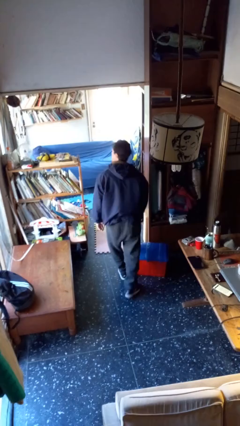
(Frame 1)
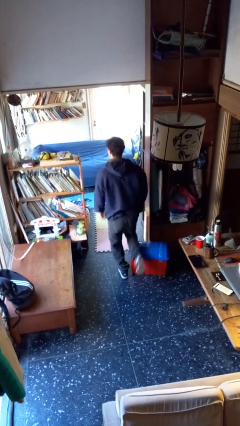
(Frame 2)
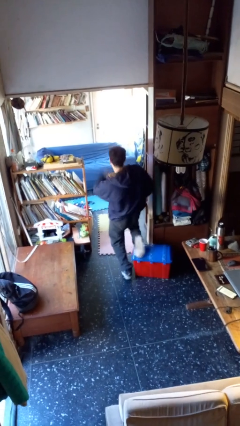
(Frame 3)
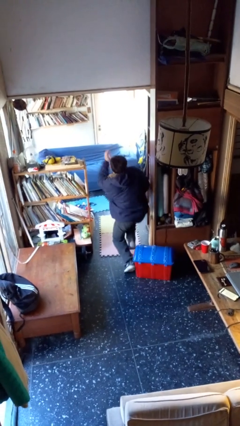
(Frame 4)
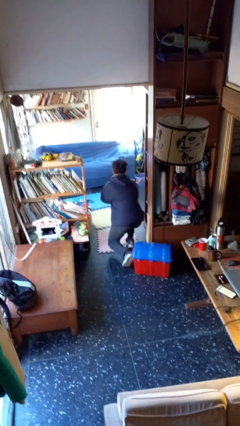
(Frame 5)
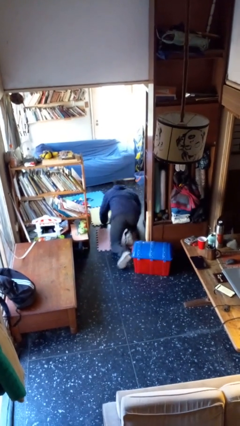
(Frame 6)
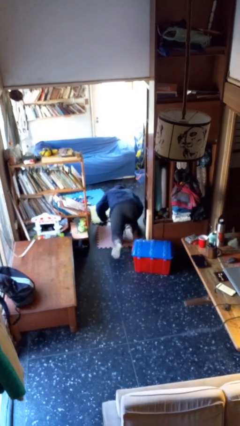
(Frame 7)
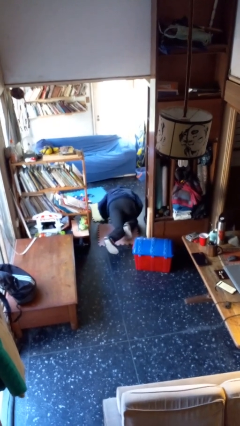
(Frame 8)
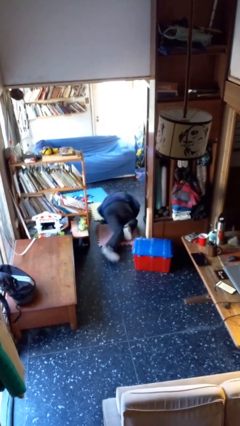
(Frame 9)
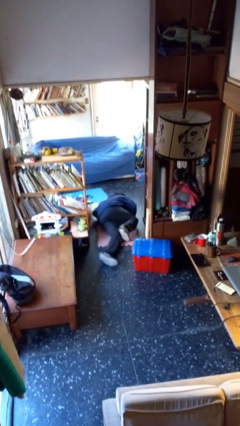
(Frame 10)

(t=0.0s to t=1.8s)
person trips on object on floor

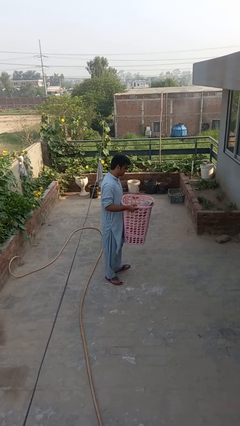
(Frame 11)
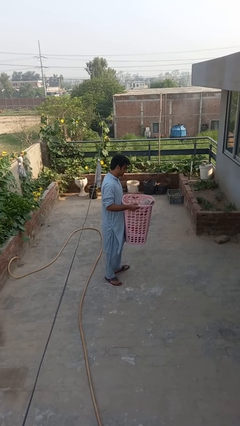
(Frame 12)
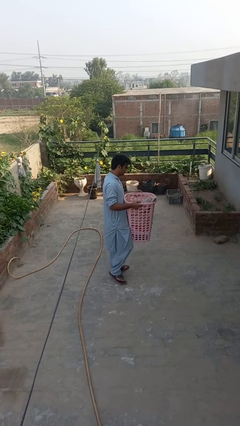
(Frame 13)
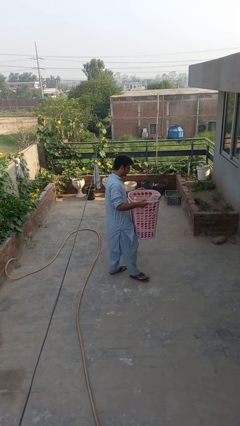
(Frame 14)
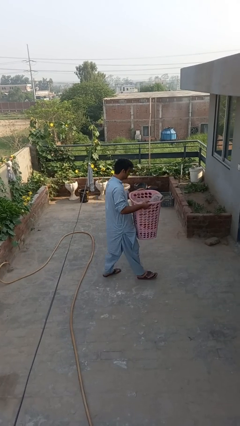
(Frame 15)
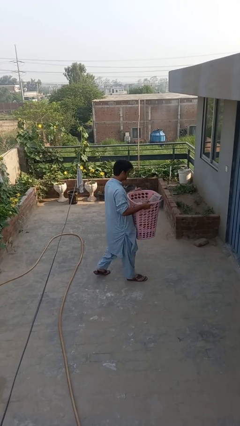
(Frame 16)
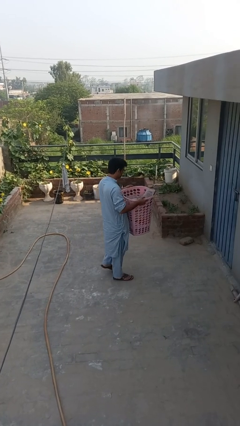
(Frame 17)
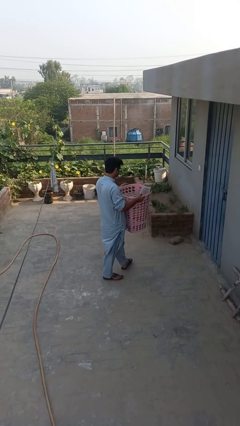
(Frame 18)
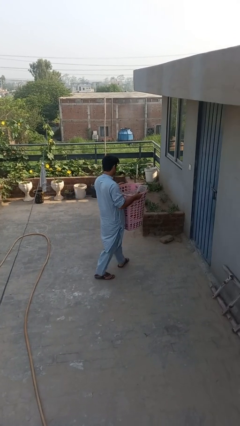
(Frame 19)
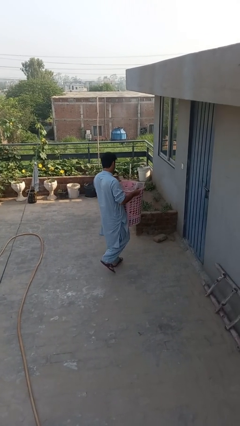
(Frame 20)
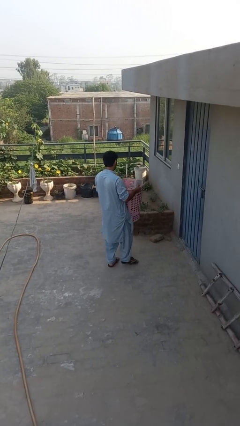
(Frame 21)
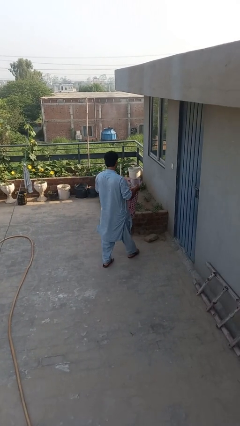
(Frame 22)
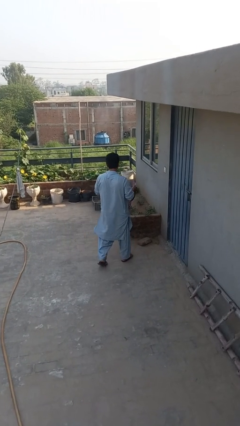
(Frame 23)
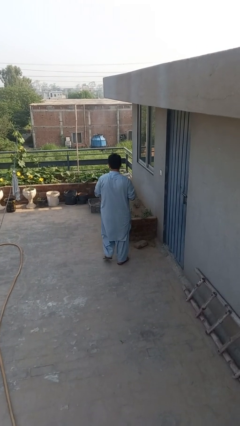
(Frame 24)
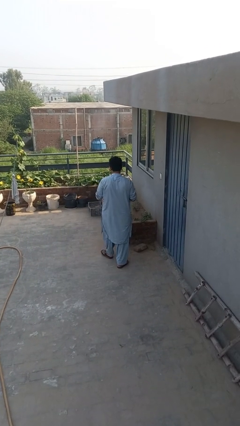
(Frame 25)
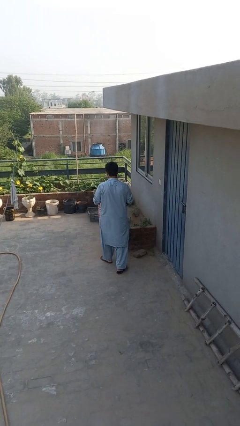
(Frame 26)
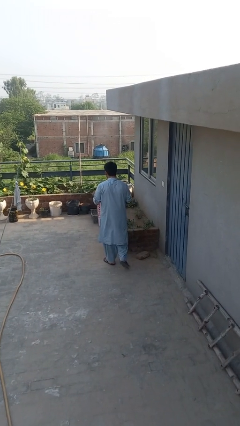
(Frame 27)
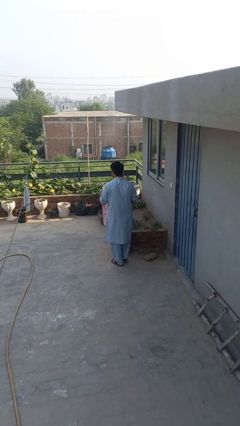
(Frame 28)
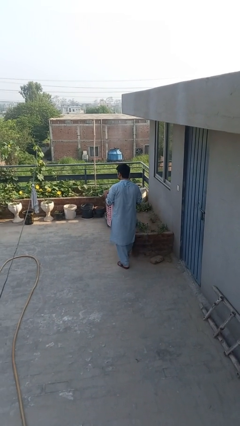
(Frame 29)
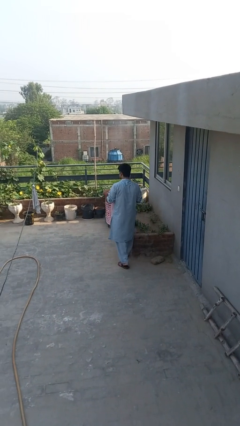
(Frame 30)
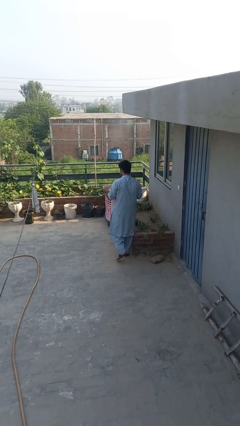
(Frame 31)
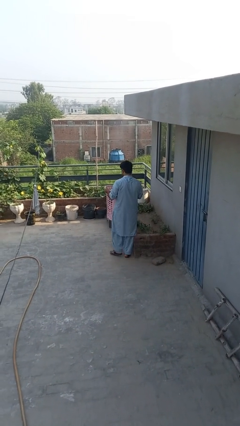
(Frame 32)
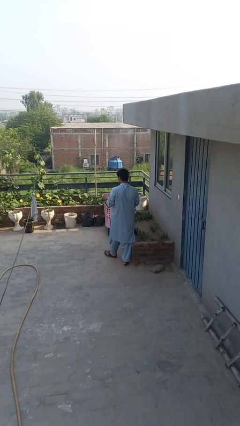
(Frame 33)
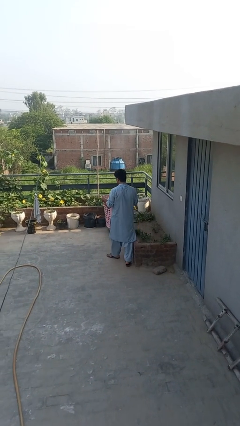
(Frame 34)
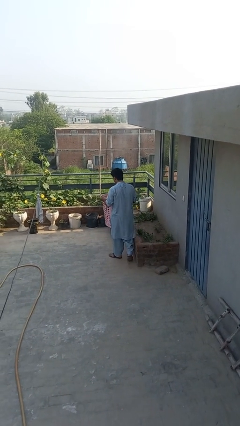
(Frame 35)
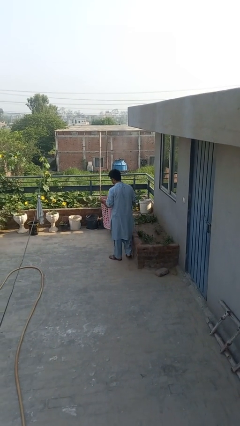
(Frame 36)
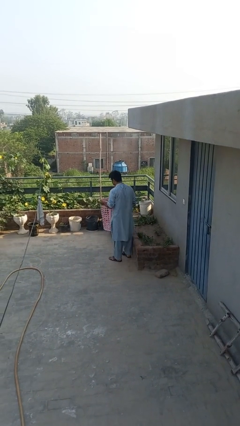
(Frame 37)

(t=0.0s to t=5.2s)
person carries laundry basket

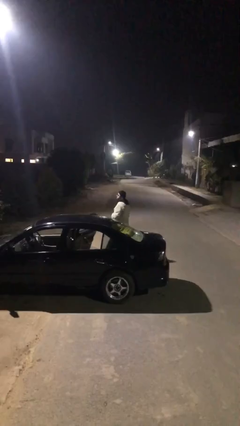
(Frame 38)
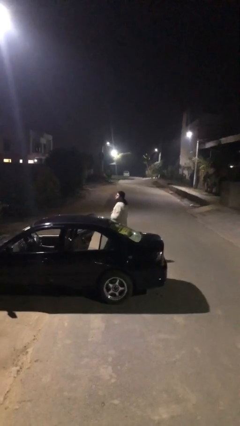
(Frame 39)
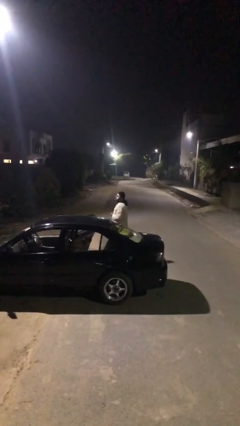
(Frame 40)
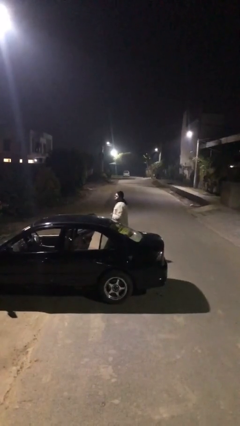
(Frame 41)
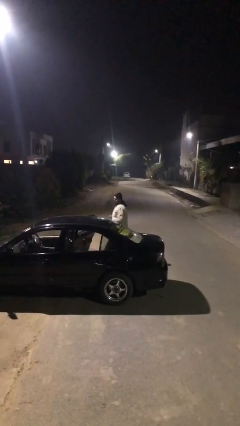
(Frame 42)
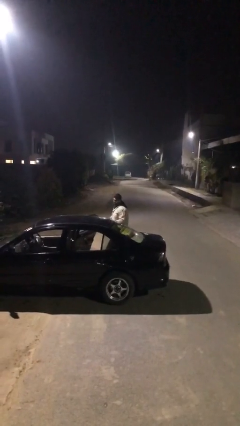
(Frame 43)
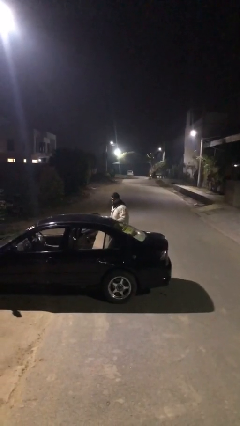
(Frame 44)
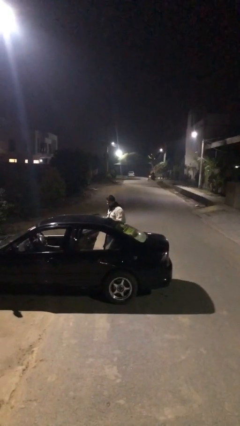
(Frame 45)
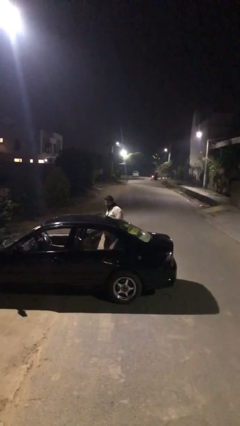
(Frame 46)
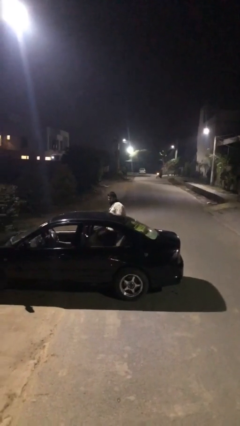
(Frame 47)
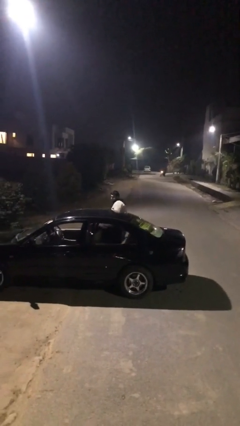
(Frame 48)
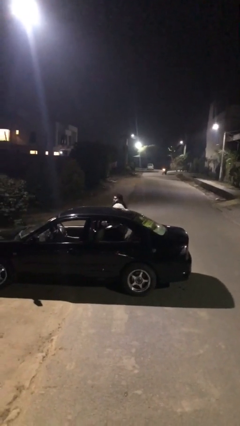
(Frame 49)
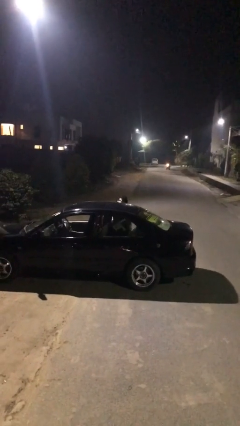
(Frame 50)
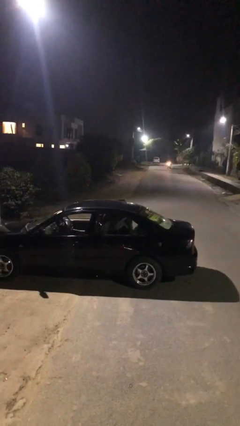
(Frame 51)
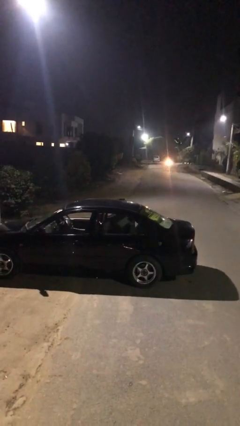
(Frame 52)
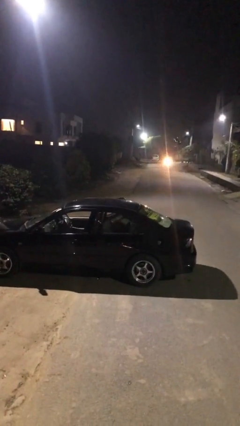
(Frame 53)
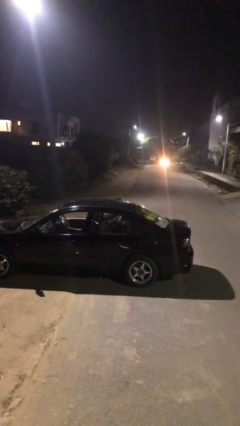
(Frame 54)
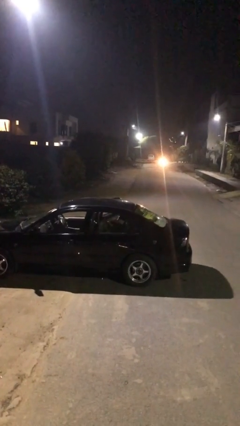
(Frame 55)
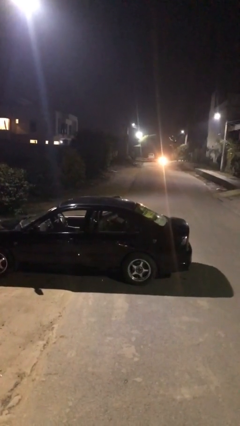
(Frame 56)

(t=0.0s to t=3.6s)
person enters car

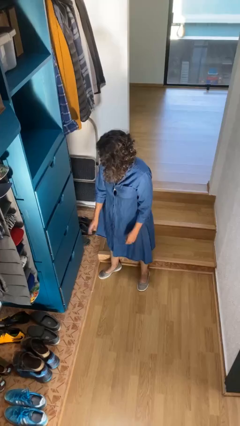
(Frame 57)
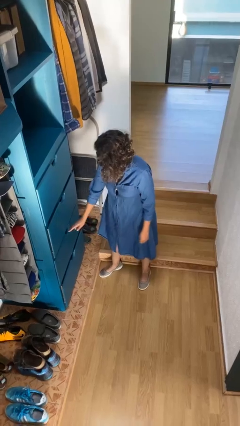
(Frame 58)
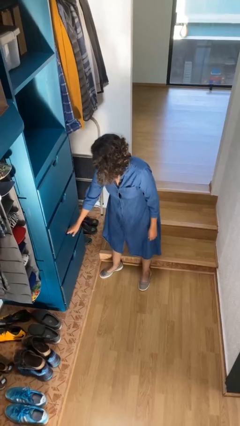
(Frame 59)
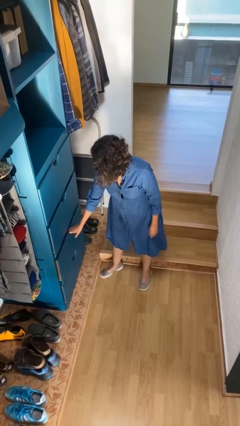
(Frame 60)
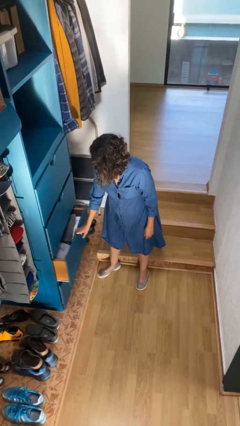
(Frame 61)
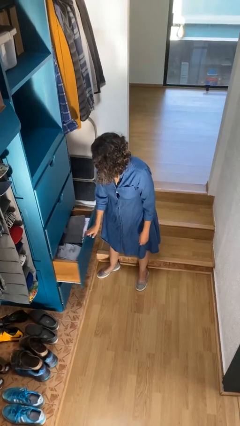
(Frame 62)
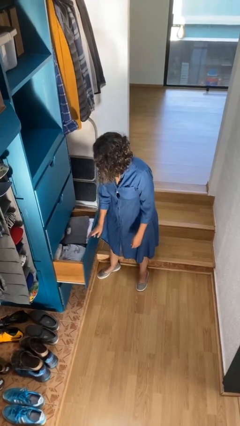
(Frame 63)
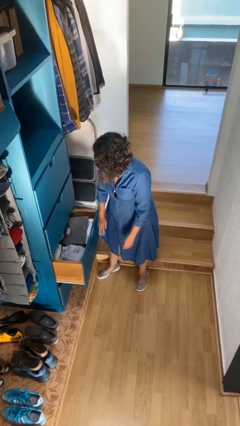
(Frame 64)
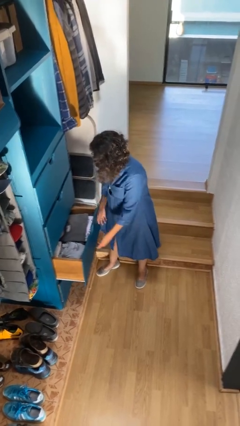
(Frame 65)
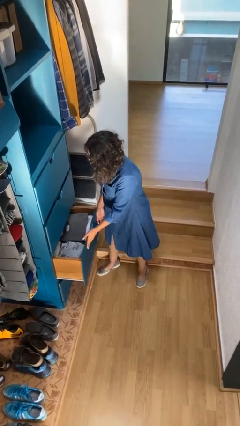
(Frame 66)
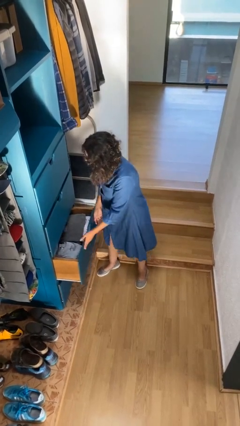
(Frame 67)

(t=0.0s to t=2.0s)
person opens dresser drawer

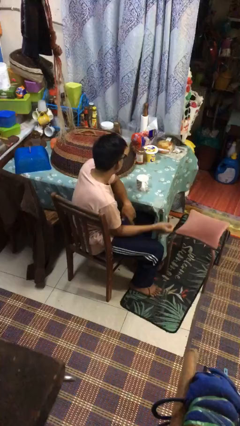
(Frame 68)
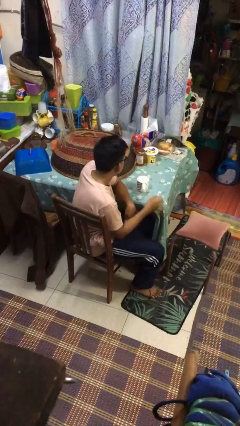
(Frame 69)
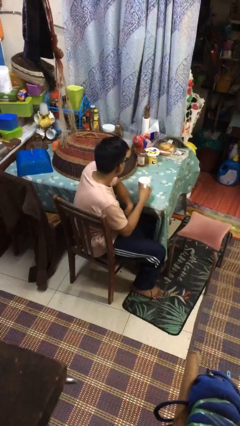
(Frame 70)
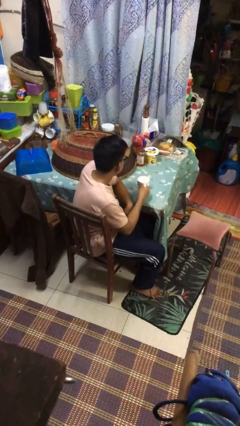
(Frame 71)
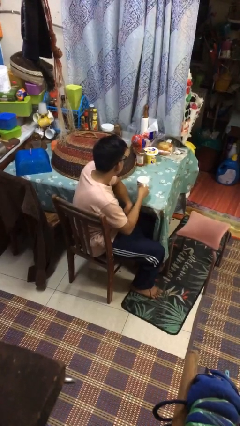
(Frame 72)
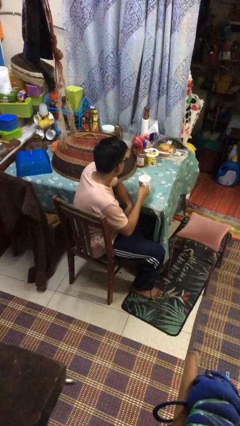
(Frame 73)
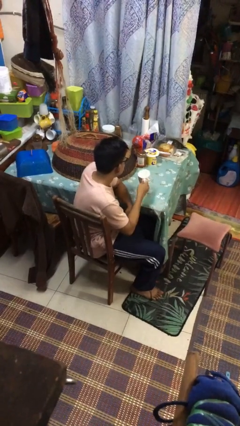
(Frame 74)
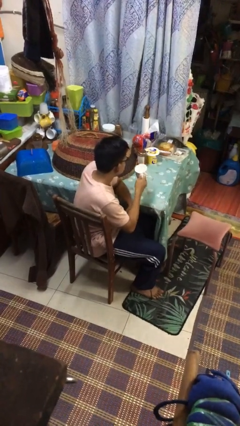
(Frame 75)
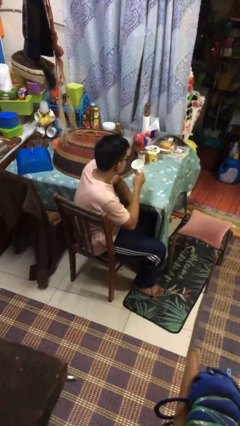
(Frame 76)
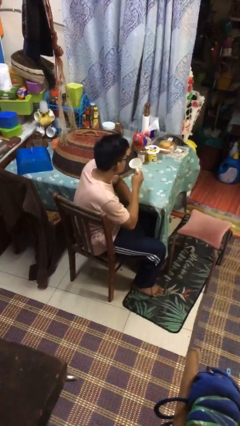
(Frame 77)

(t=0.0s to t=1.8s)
person picks up object from table

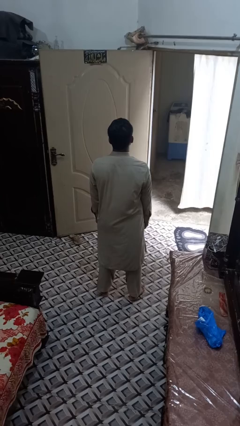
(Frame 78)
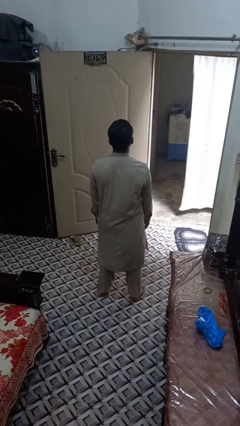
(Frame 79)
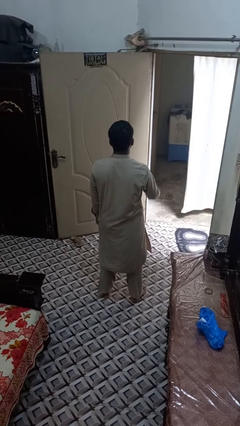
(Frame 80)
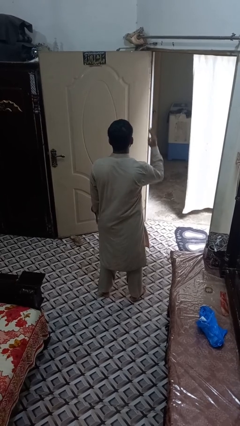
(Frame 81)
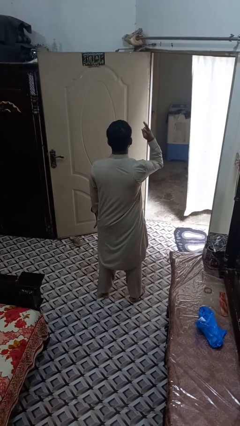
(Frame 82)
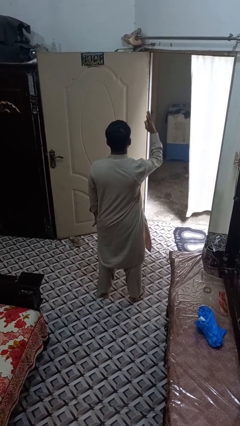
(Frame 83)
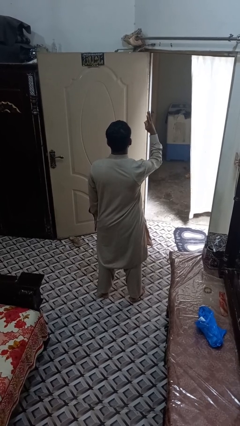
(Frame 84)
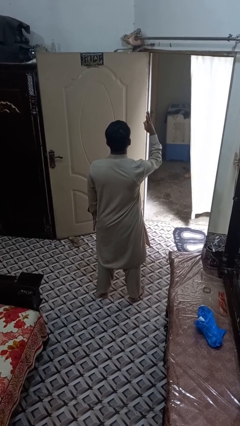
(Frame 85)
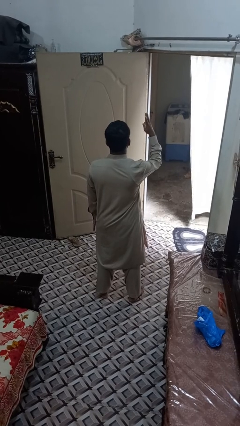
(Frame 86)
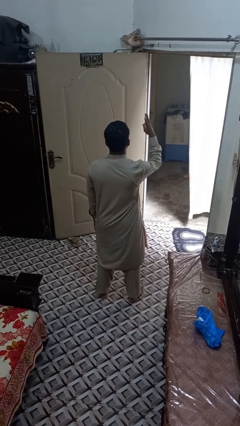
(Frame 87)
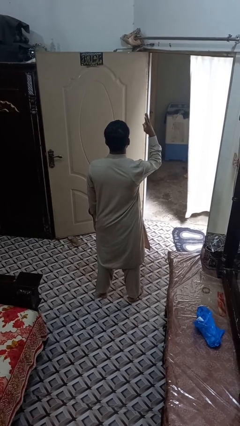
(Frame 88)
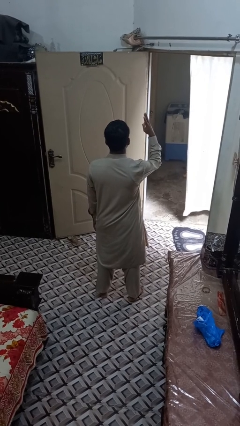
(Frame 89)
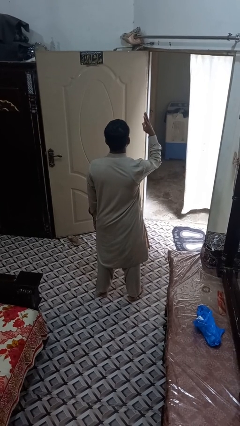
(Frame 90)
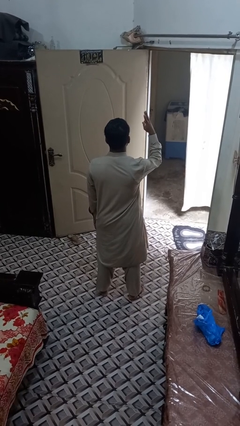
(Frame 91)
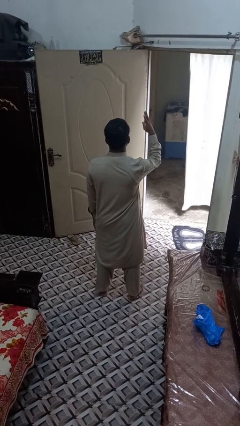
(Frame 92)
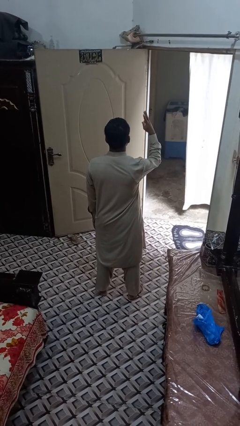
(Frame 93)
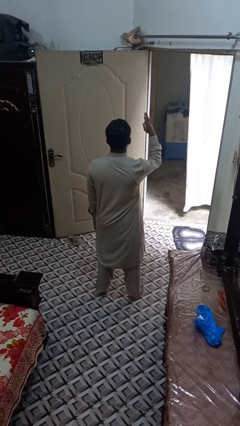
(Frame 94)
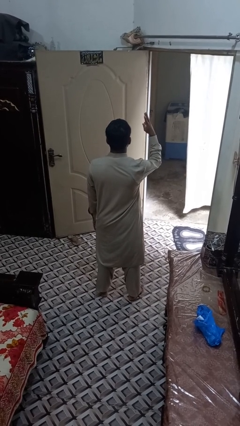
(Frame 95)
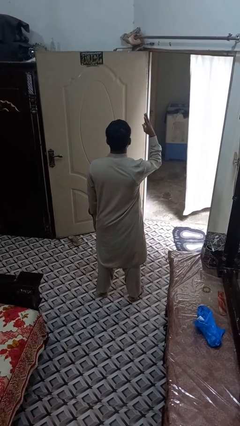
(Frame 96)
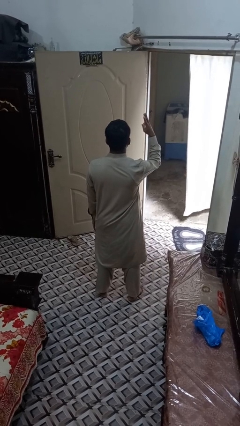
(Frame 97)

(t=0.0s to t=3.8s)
person gestures number three
